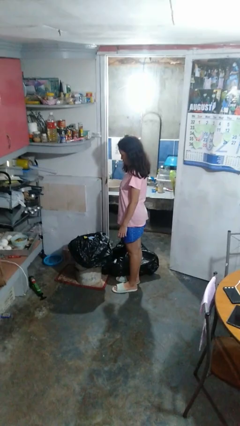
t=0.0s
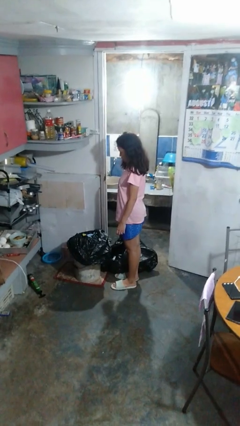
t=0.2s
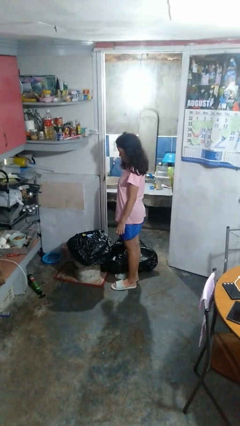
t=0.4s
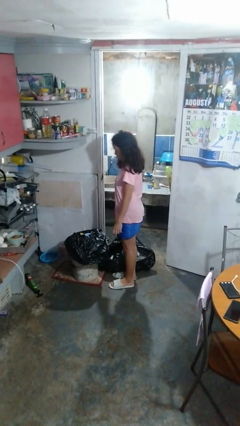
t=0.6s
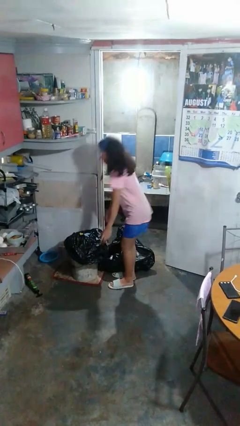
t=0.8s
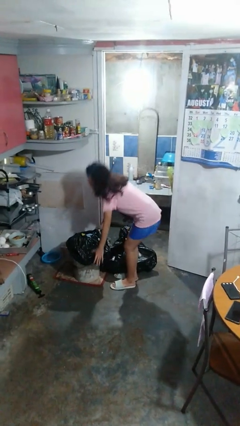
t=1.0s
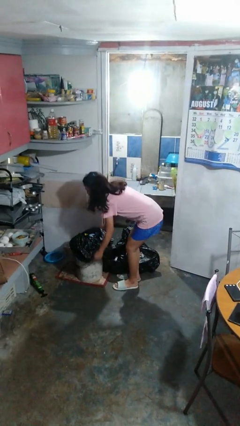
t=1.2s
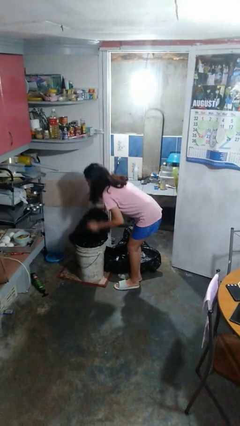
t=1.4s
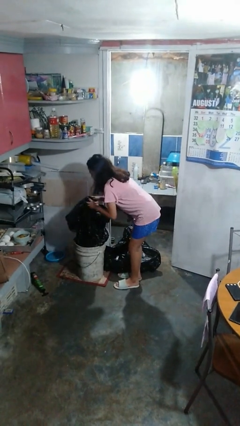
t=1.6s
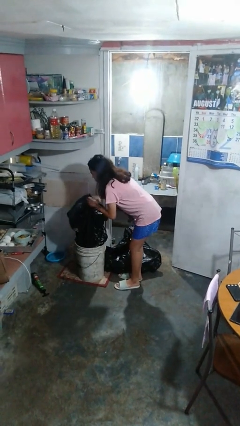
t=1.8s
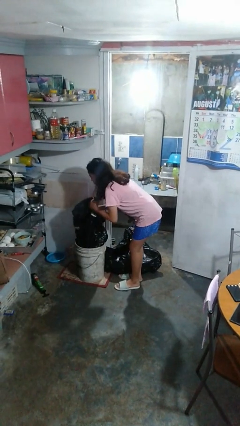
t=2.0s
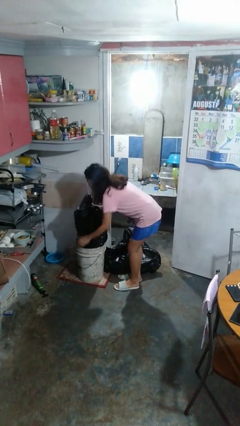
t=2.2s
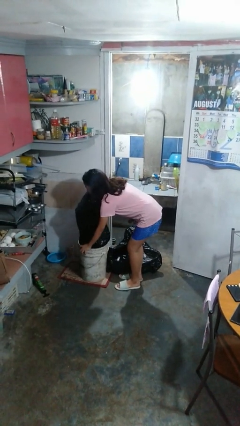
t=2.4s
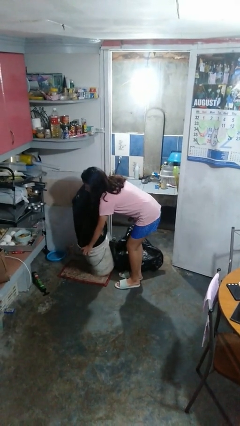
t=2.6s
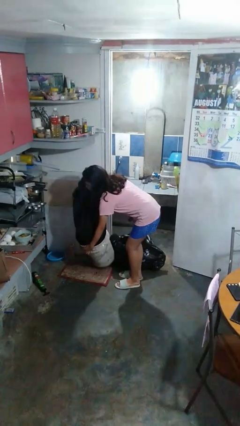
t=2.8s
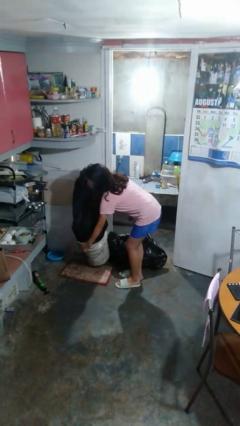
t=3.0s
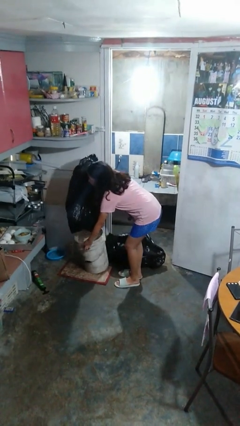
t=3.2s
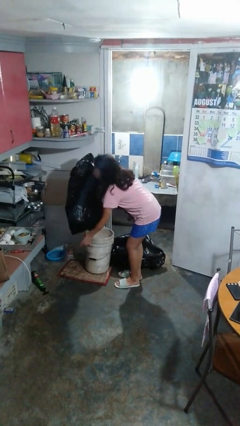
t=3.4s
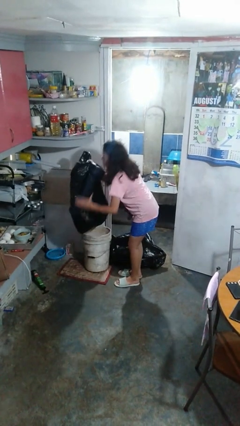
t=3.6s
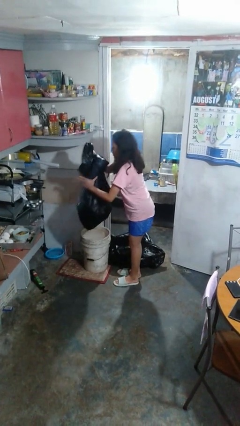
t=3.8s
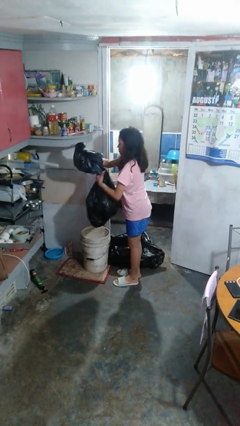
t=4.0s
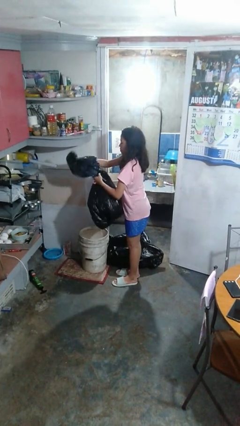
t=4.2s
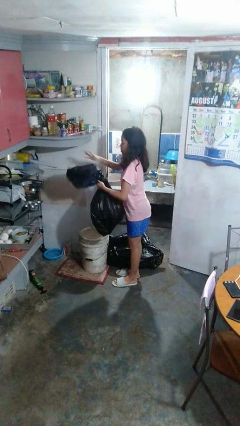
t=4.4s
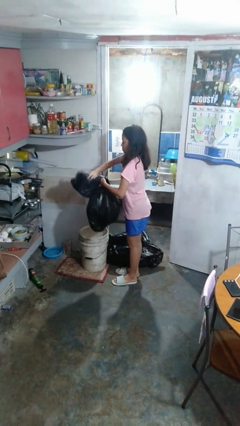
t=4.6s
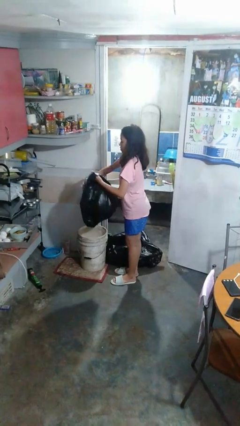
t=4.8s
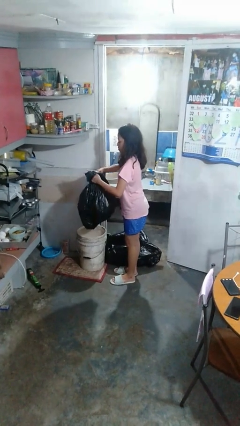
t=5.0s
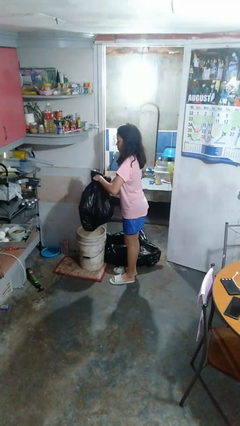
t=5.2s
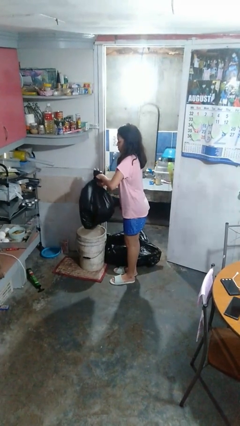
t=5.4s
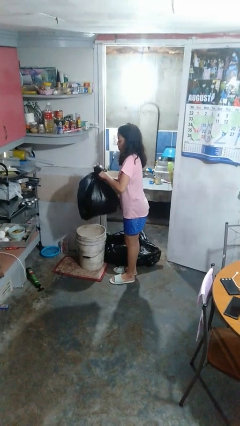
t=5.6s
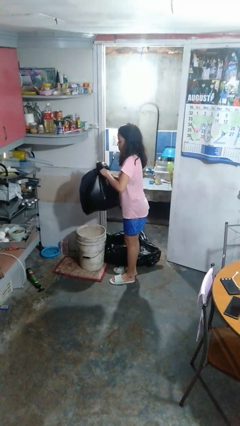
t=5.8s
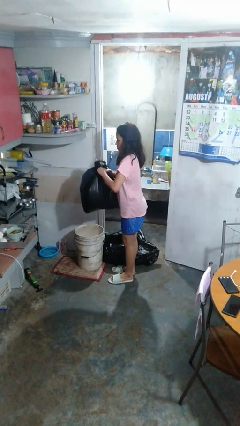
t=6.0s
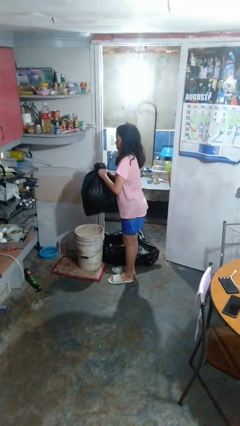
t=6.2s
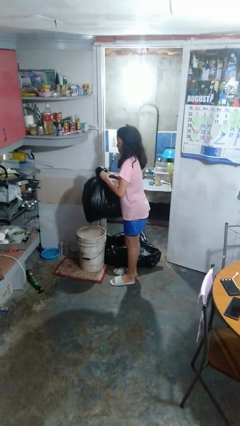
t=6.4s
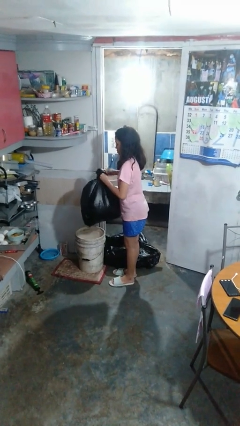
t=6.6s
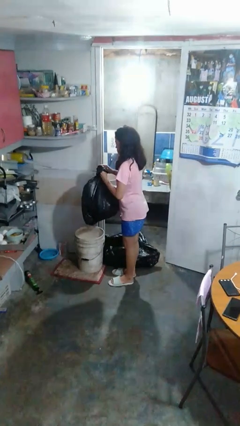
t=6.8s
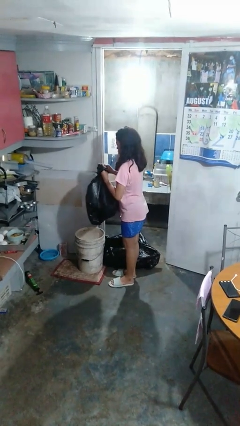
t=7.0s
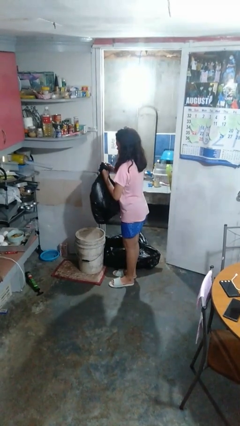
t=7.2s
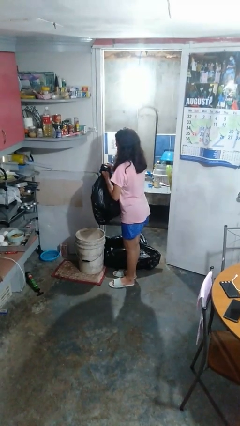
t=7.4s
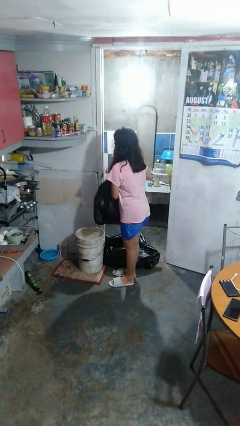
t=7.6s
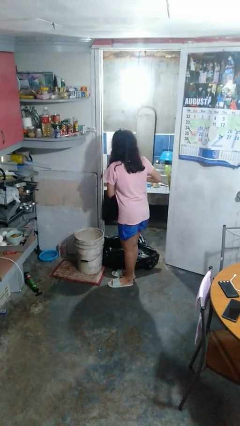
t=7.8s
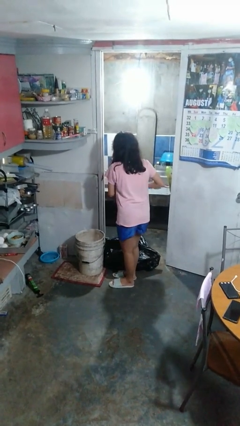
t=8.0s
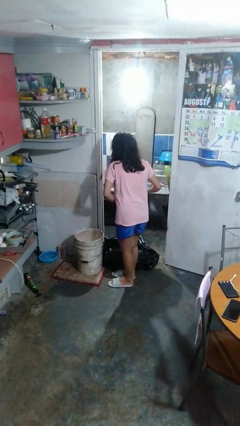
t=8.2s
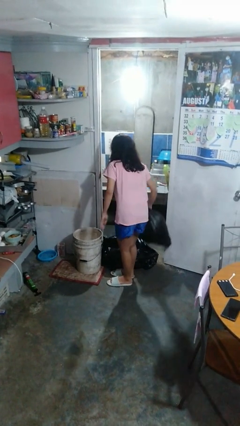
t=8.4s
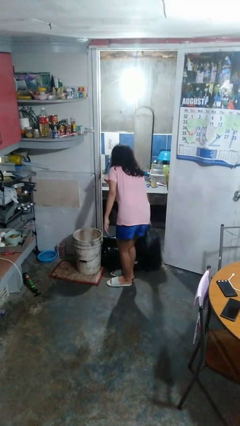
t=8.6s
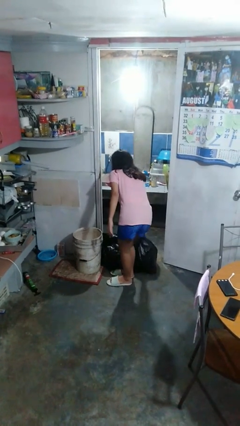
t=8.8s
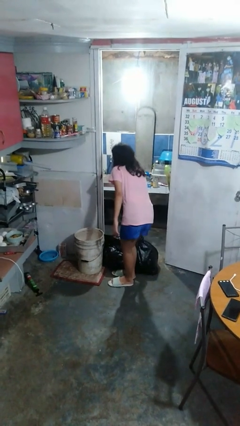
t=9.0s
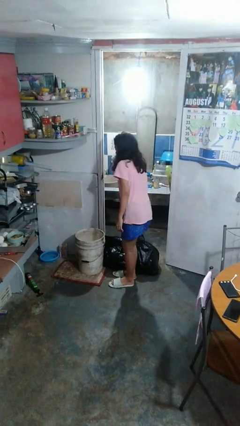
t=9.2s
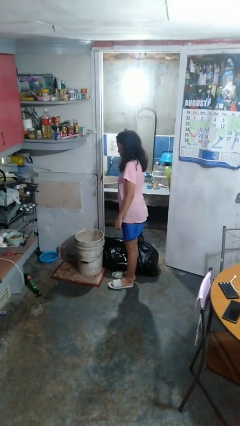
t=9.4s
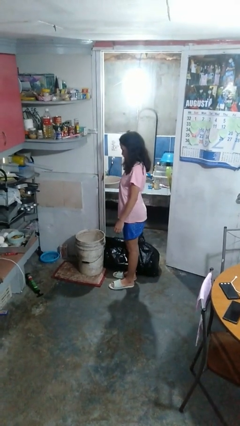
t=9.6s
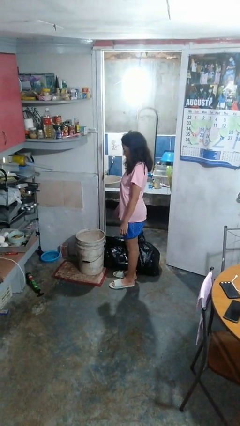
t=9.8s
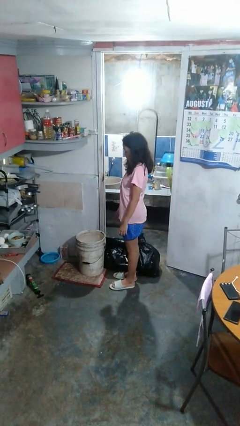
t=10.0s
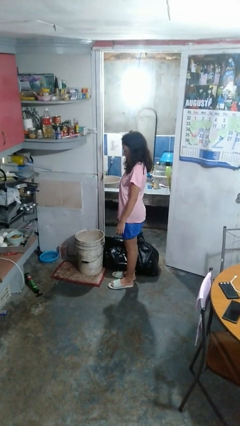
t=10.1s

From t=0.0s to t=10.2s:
person removes trashbag from trashcan

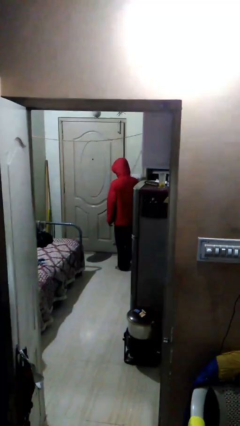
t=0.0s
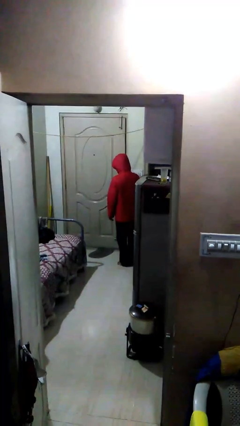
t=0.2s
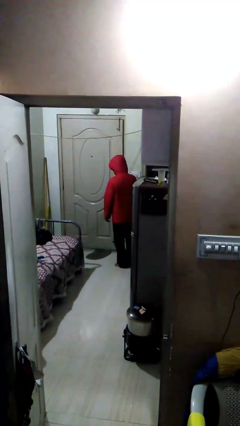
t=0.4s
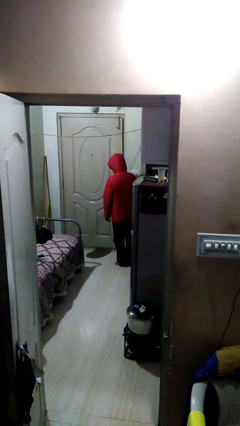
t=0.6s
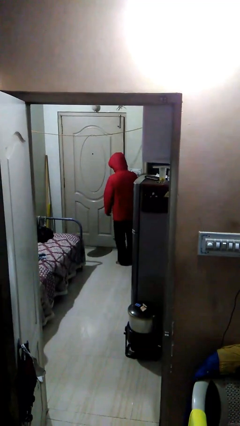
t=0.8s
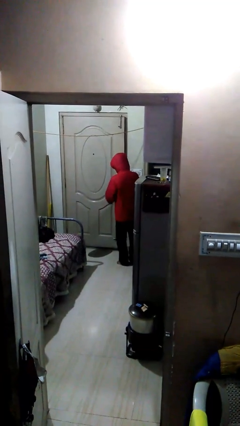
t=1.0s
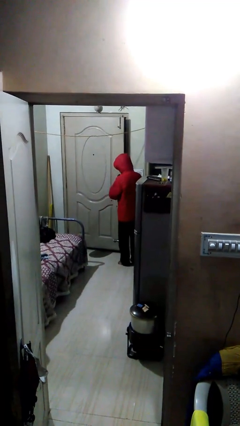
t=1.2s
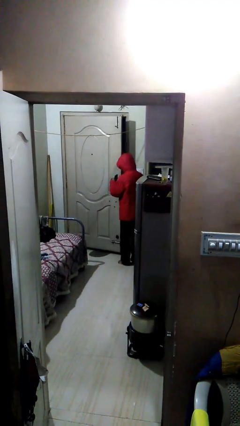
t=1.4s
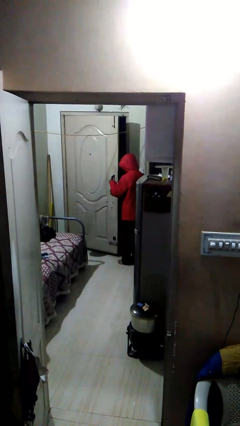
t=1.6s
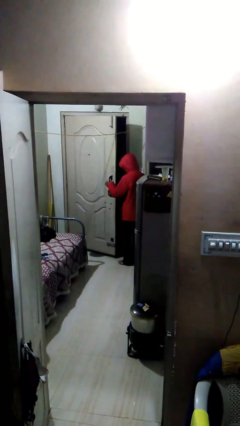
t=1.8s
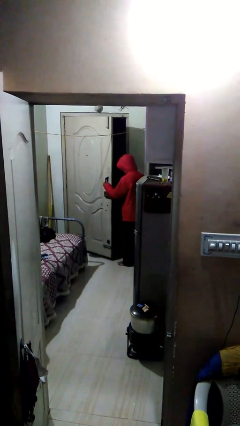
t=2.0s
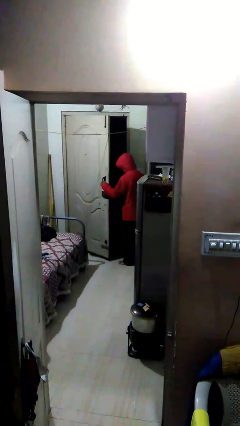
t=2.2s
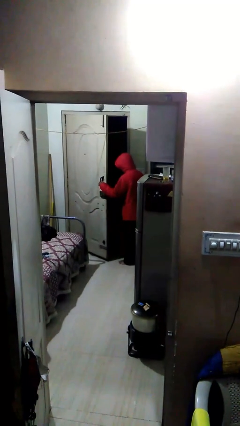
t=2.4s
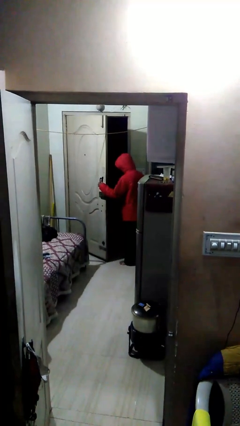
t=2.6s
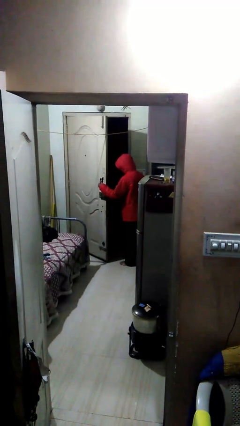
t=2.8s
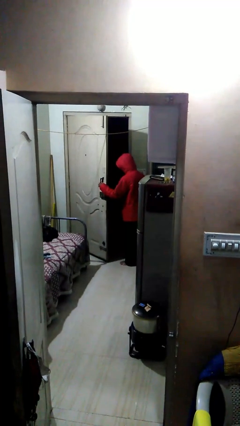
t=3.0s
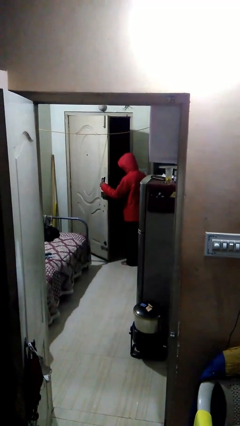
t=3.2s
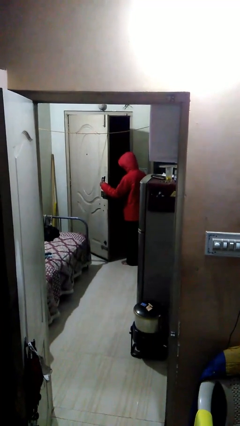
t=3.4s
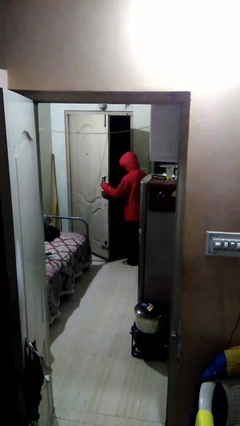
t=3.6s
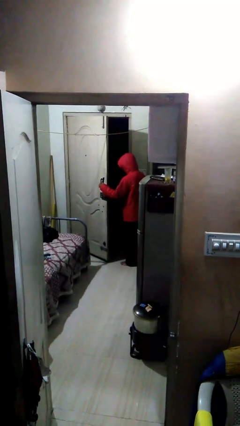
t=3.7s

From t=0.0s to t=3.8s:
person opens facility door

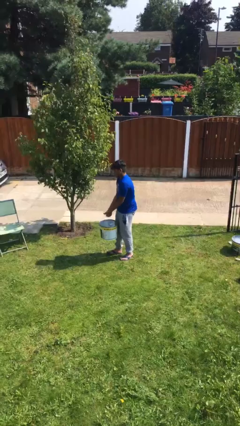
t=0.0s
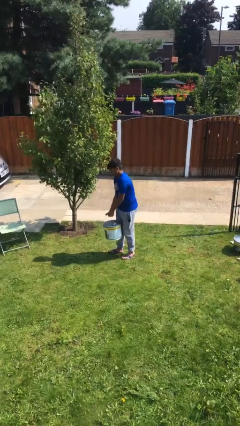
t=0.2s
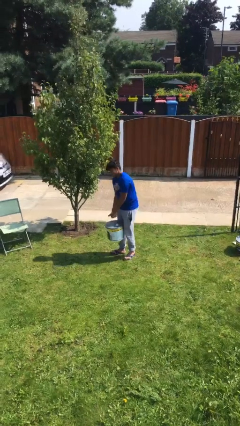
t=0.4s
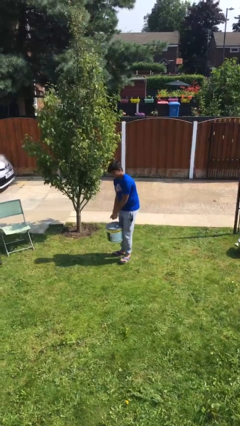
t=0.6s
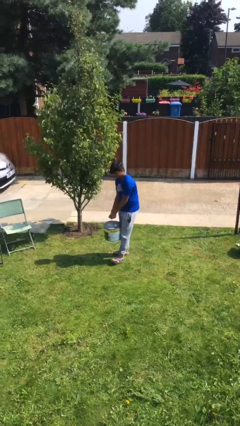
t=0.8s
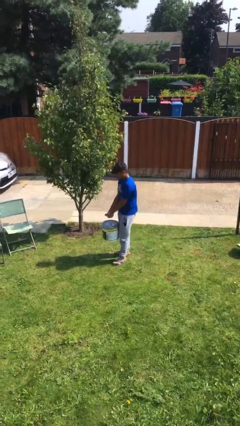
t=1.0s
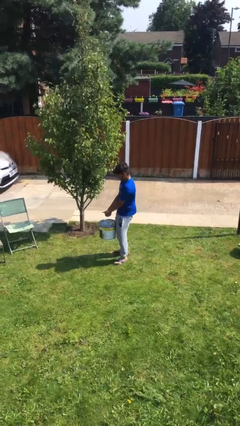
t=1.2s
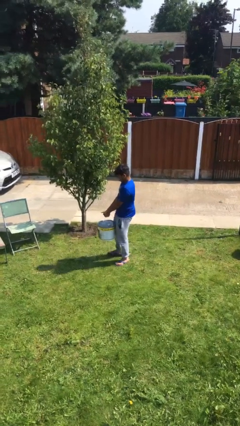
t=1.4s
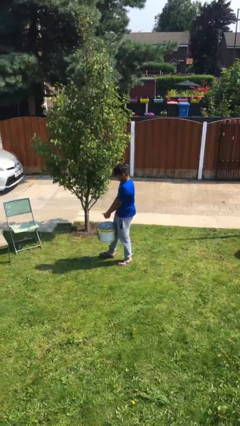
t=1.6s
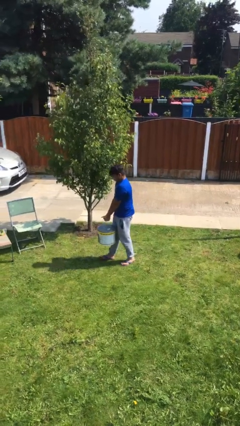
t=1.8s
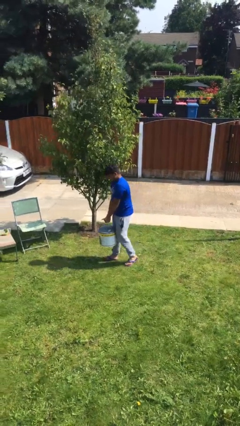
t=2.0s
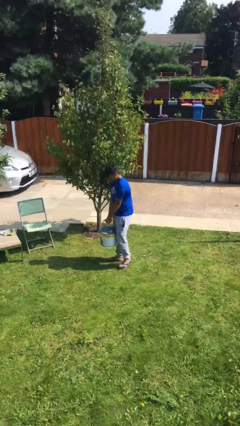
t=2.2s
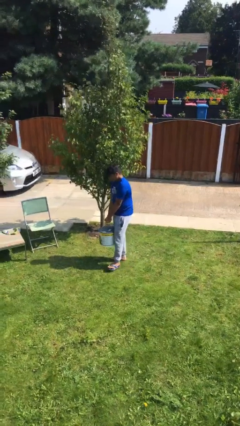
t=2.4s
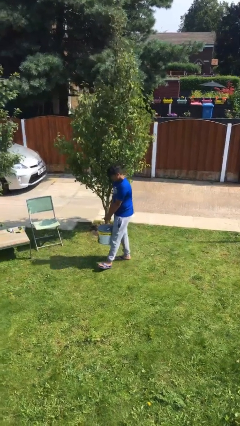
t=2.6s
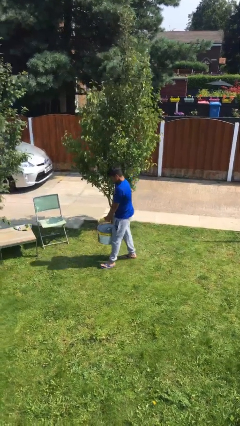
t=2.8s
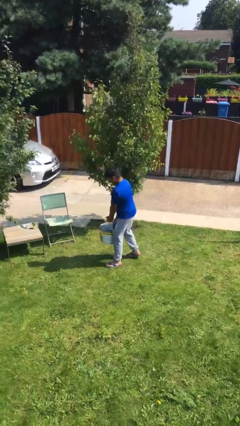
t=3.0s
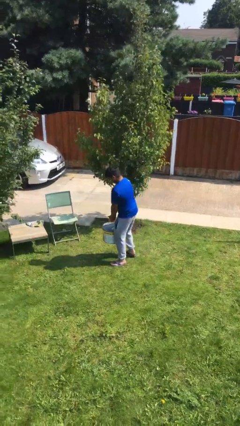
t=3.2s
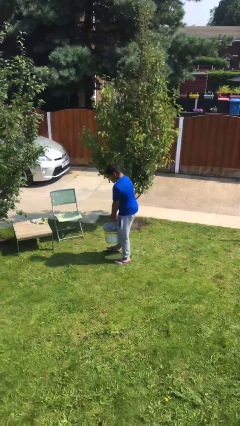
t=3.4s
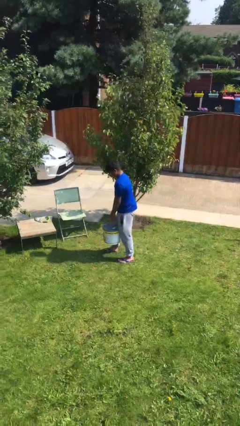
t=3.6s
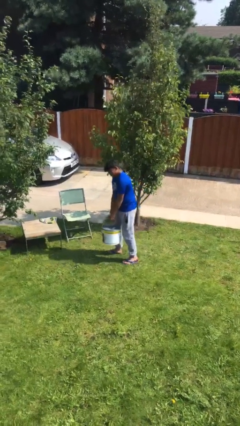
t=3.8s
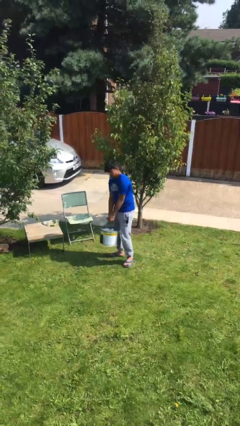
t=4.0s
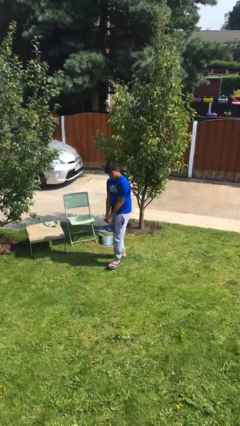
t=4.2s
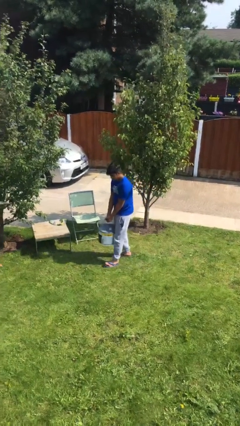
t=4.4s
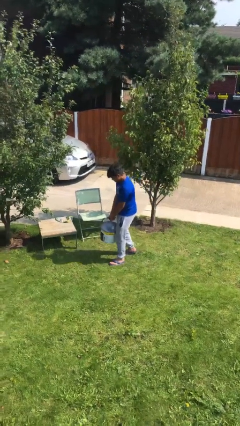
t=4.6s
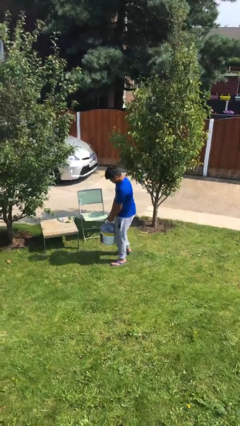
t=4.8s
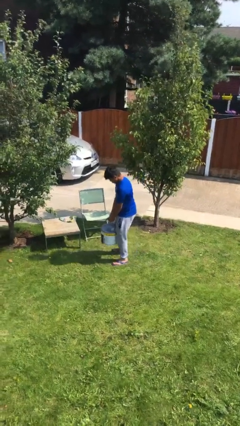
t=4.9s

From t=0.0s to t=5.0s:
person carries heavy object
